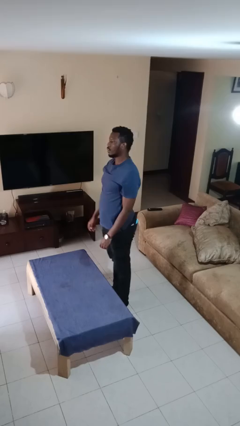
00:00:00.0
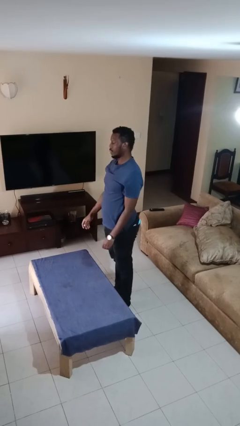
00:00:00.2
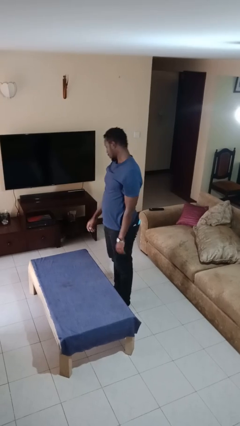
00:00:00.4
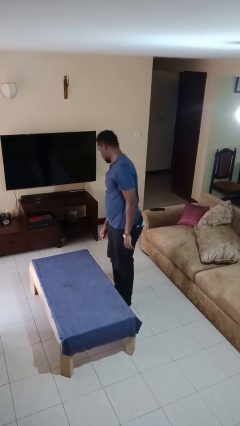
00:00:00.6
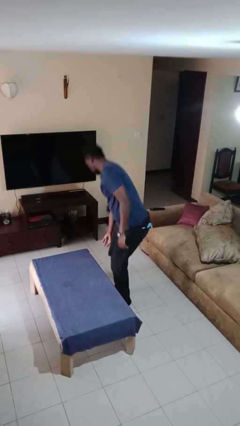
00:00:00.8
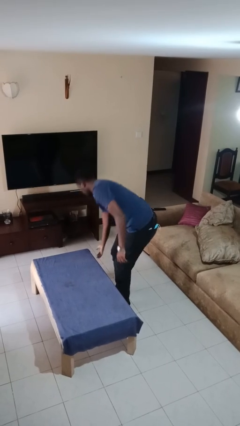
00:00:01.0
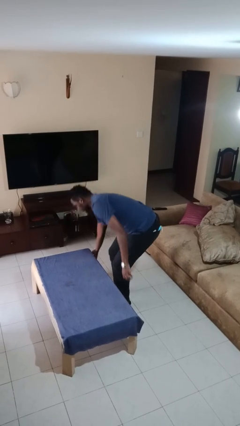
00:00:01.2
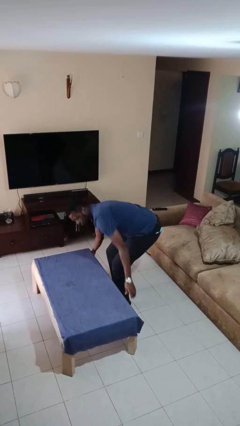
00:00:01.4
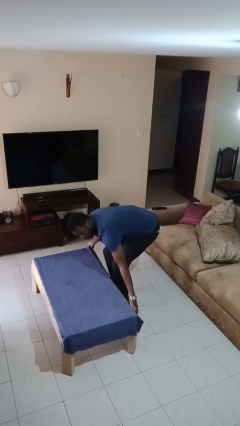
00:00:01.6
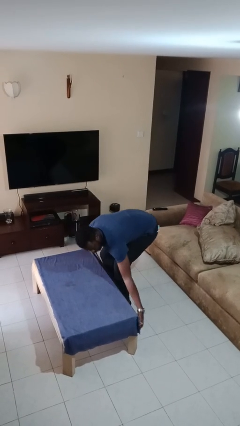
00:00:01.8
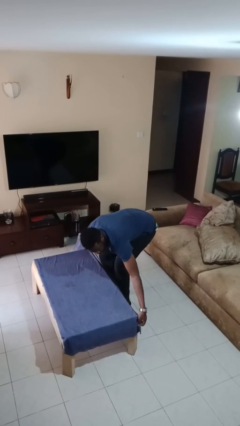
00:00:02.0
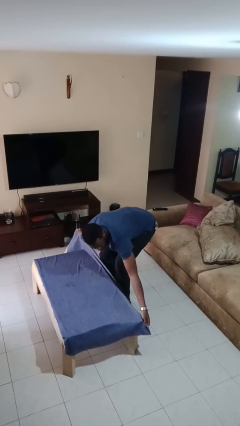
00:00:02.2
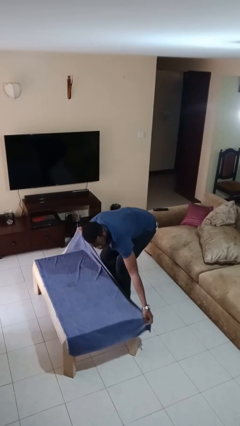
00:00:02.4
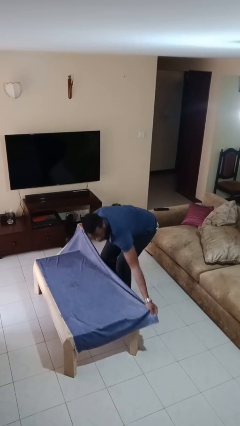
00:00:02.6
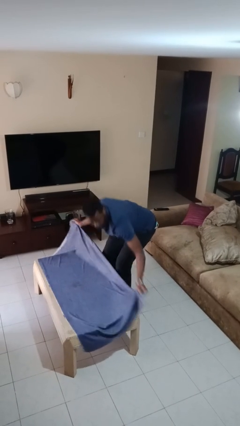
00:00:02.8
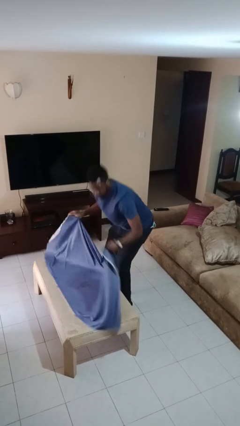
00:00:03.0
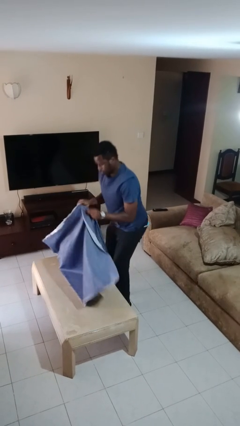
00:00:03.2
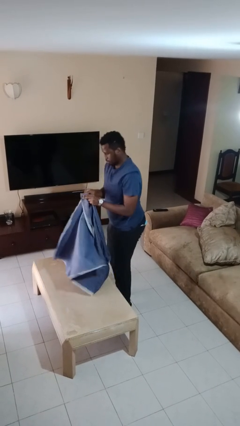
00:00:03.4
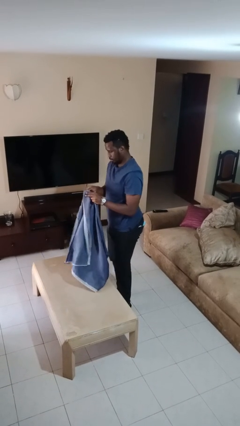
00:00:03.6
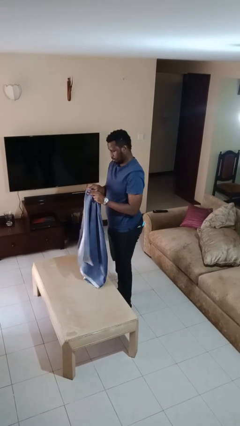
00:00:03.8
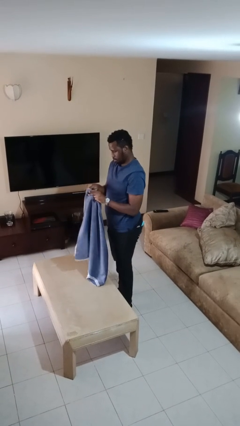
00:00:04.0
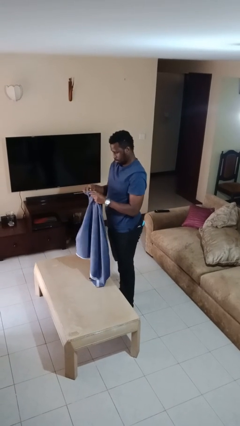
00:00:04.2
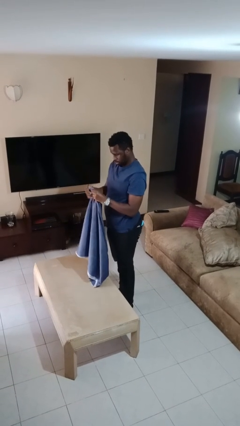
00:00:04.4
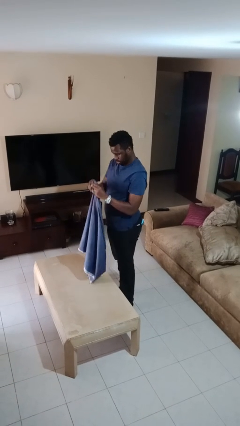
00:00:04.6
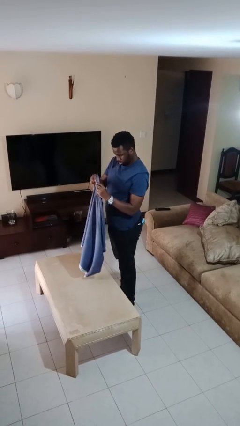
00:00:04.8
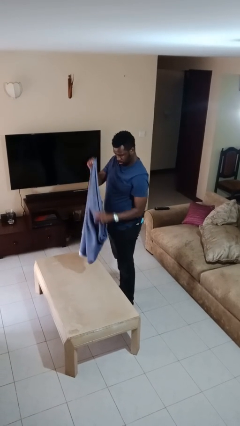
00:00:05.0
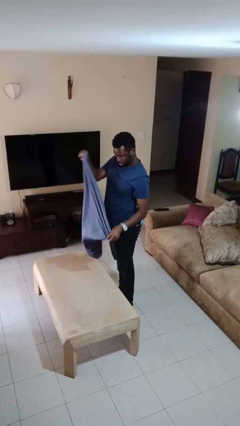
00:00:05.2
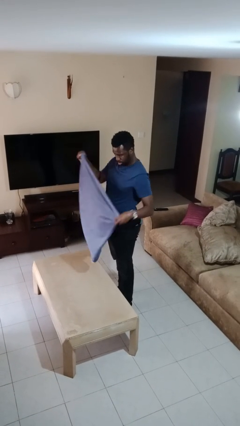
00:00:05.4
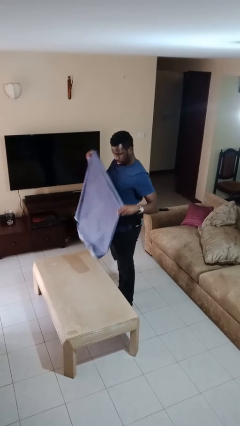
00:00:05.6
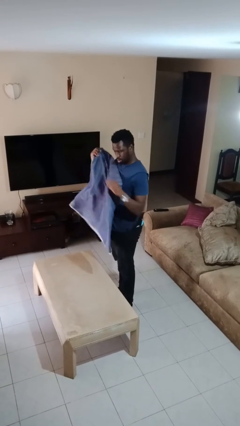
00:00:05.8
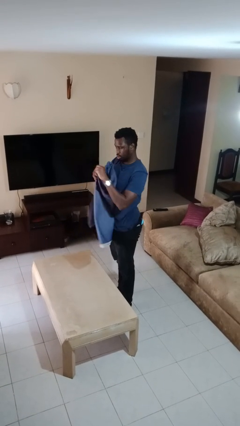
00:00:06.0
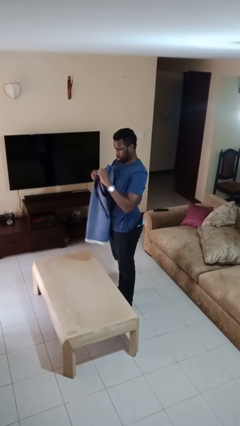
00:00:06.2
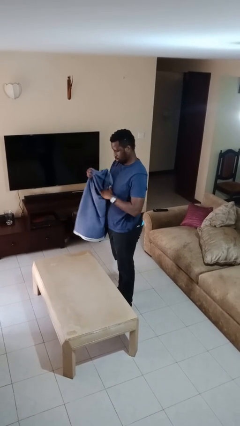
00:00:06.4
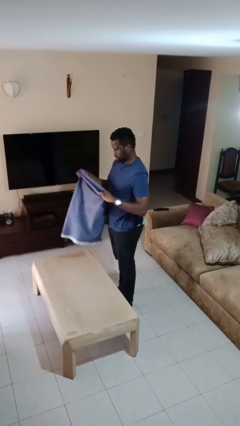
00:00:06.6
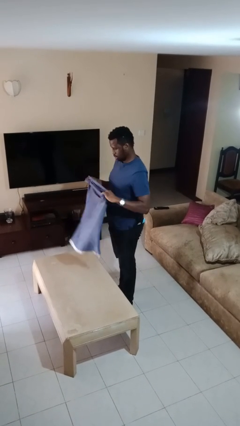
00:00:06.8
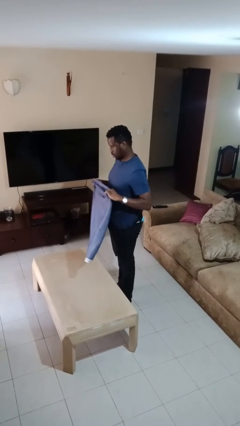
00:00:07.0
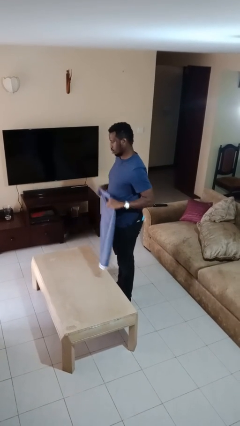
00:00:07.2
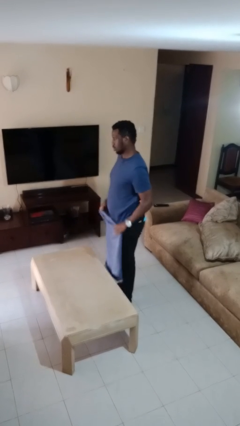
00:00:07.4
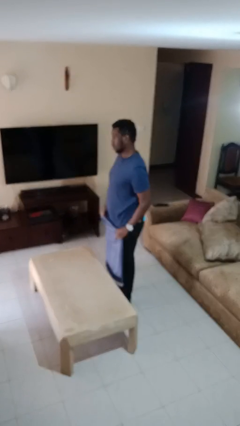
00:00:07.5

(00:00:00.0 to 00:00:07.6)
person folds tablecloth

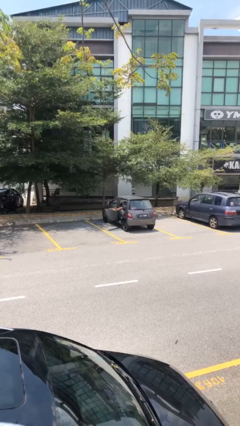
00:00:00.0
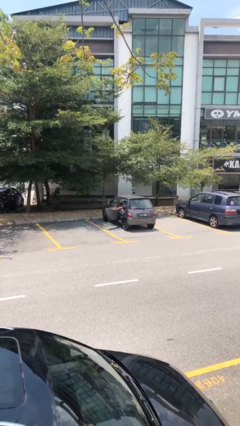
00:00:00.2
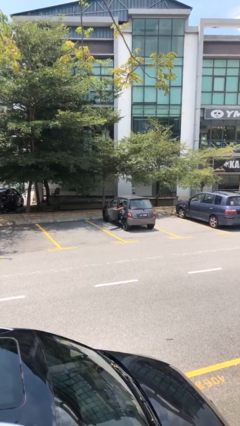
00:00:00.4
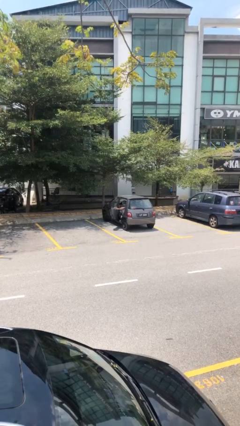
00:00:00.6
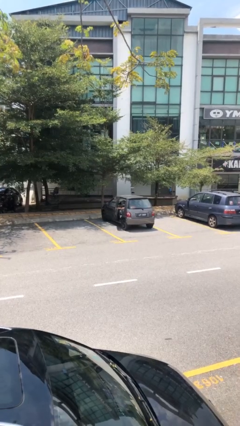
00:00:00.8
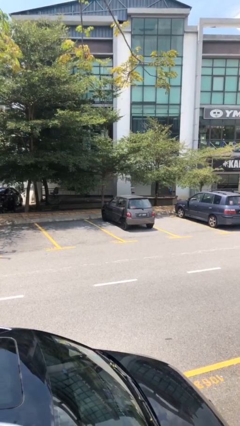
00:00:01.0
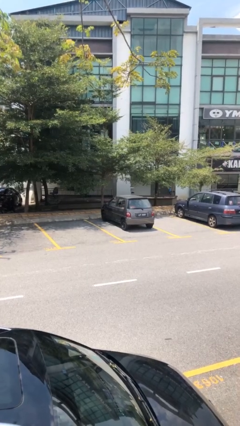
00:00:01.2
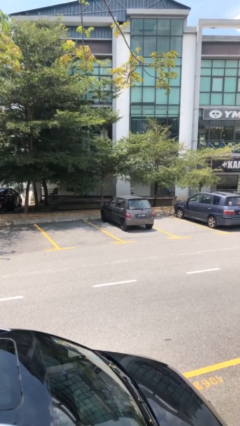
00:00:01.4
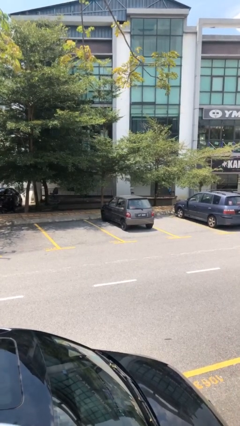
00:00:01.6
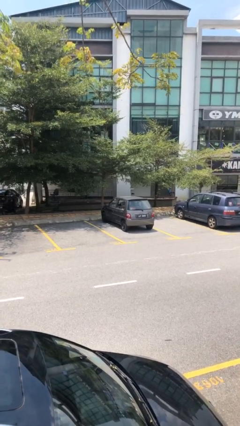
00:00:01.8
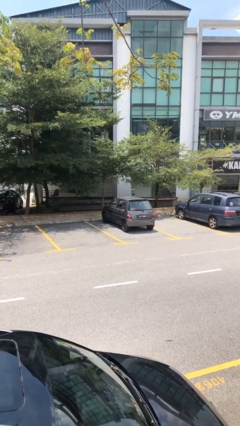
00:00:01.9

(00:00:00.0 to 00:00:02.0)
person closes car door

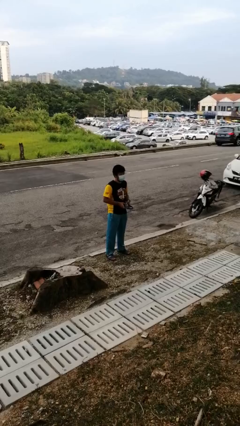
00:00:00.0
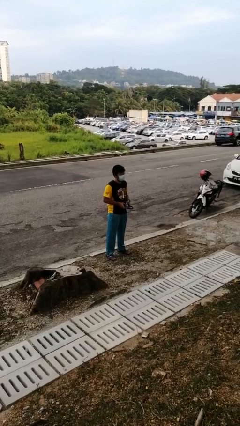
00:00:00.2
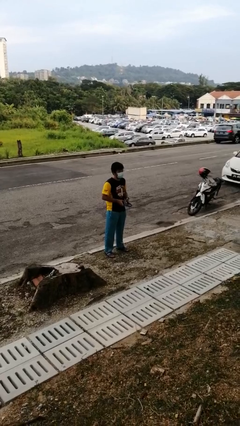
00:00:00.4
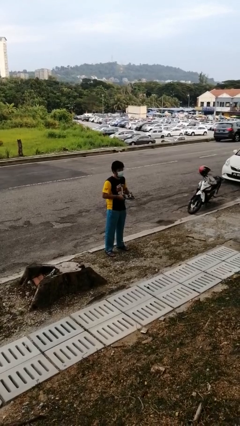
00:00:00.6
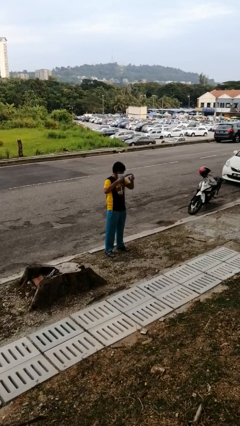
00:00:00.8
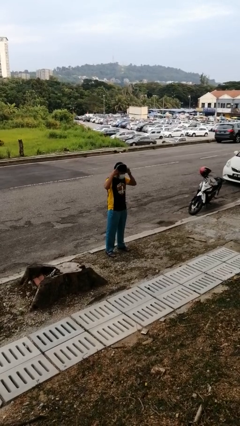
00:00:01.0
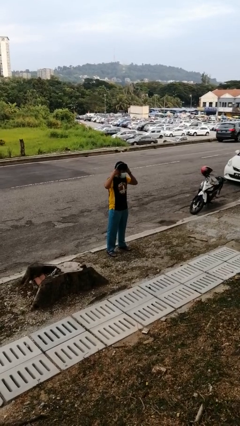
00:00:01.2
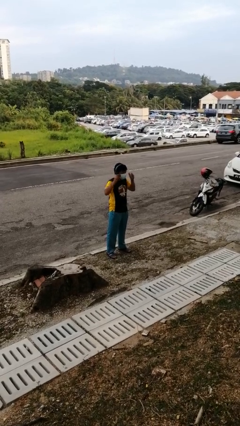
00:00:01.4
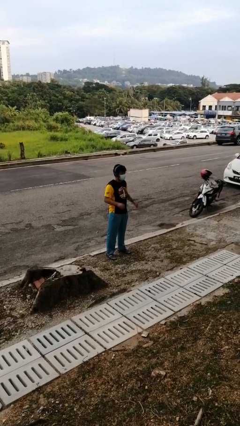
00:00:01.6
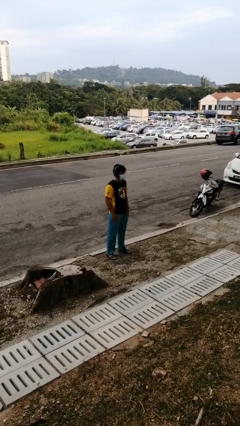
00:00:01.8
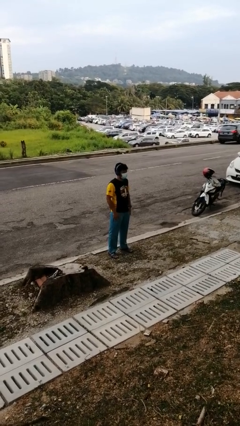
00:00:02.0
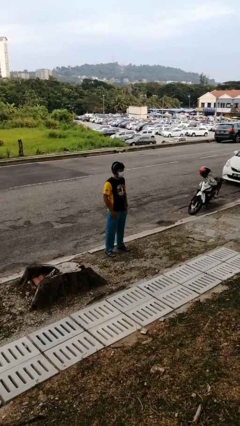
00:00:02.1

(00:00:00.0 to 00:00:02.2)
person puts on headphones

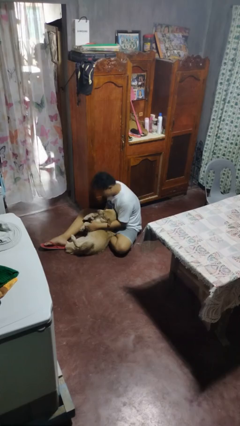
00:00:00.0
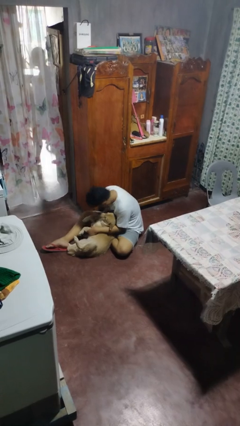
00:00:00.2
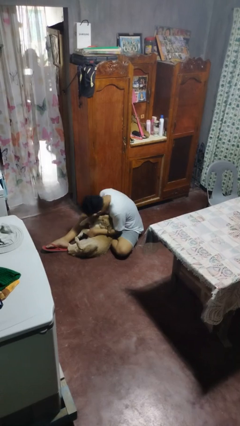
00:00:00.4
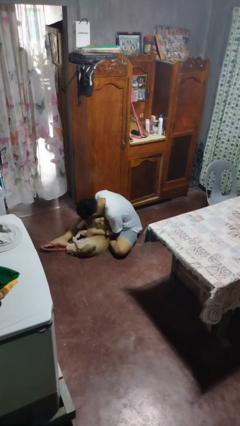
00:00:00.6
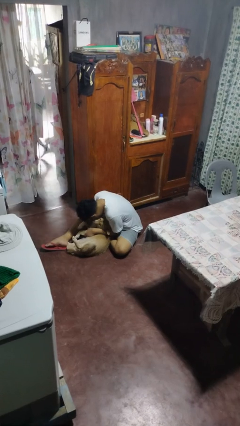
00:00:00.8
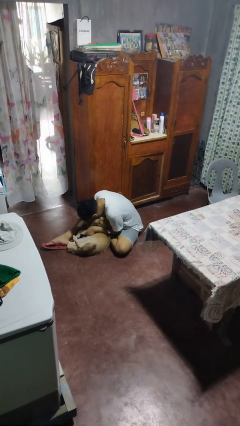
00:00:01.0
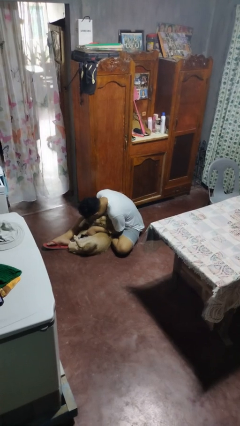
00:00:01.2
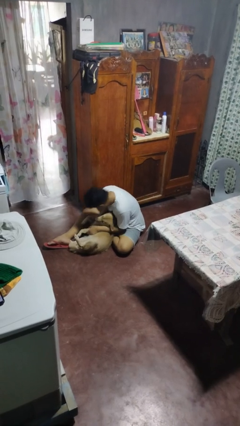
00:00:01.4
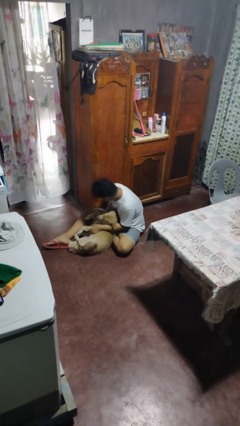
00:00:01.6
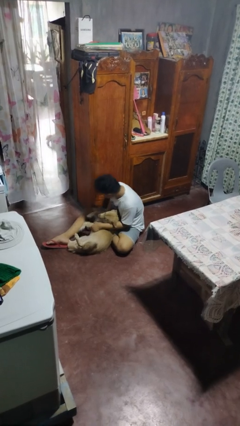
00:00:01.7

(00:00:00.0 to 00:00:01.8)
person hugs dog

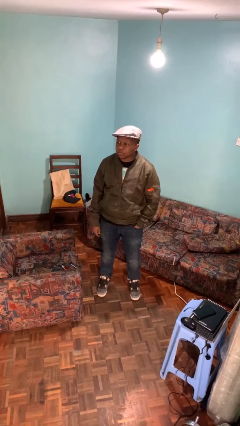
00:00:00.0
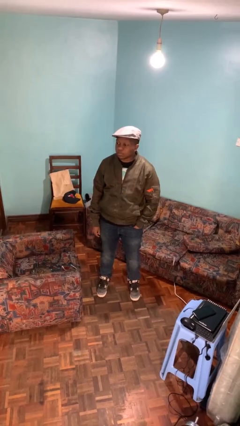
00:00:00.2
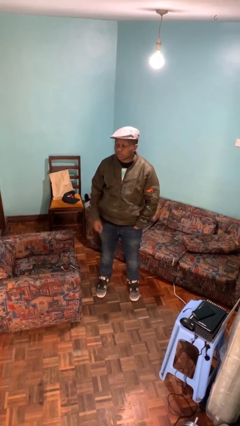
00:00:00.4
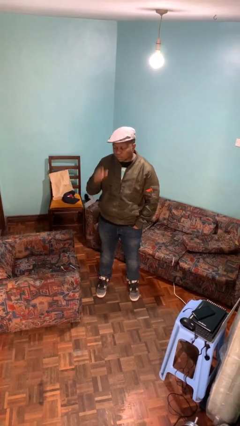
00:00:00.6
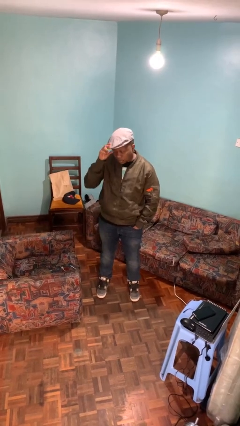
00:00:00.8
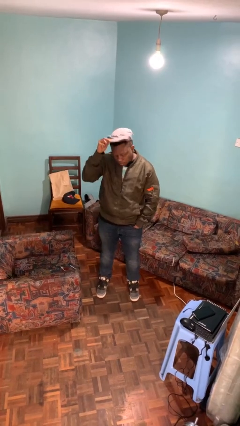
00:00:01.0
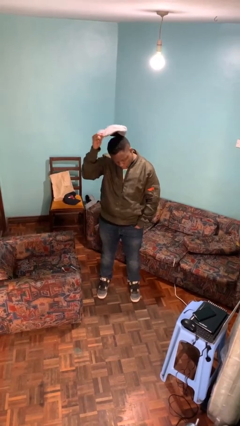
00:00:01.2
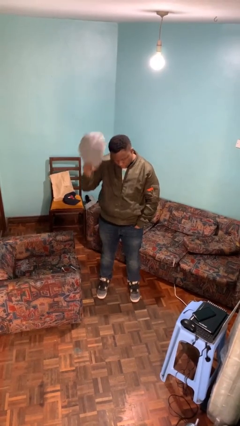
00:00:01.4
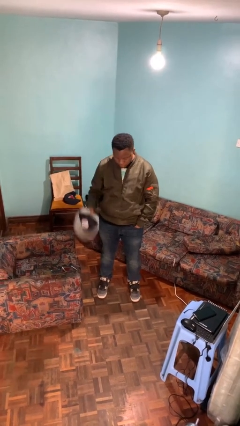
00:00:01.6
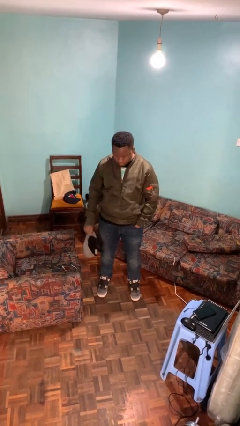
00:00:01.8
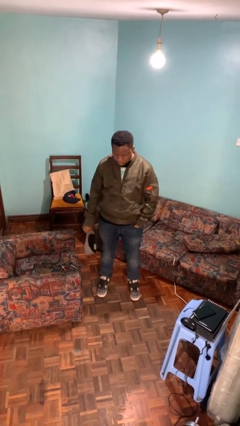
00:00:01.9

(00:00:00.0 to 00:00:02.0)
person takes off hat

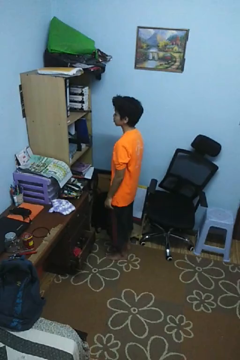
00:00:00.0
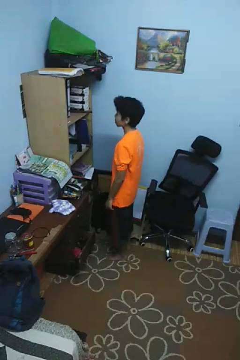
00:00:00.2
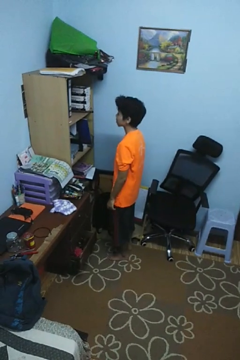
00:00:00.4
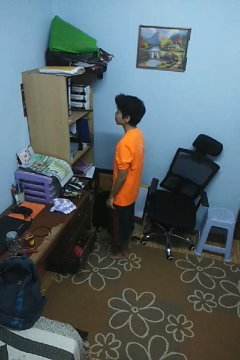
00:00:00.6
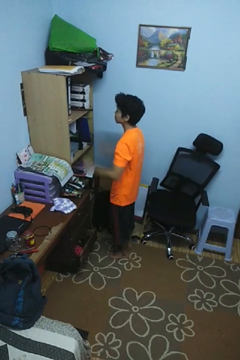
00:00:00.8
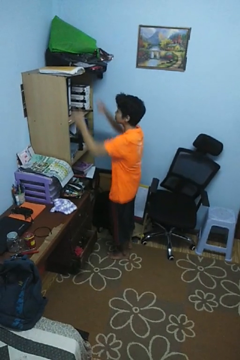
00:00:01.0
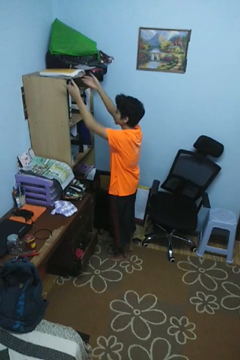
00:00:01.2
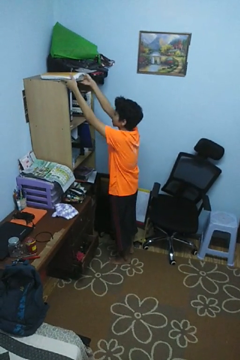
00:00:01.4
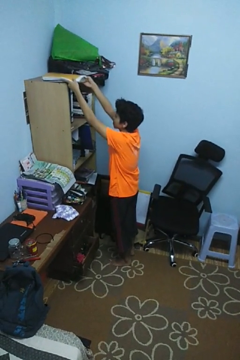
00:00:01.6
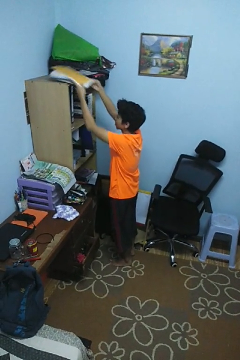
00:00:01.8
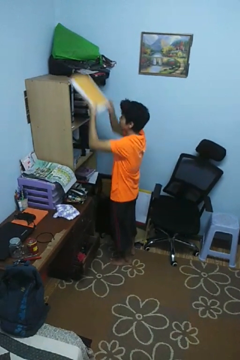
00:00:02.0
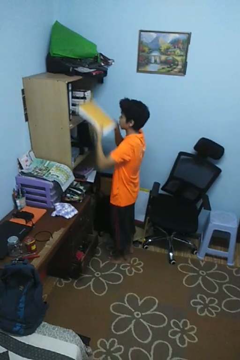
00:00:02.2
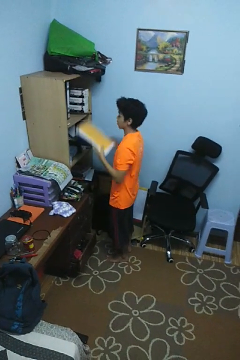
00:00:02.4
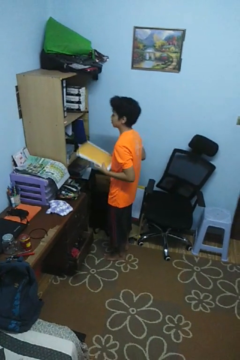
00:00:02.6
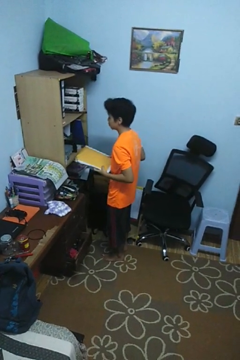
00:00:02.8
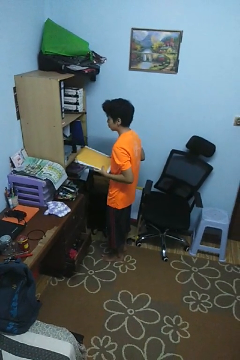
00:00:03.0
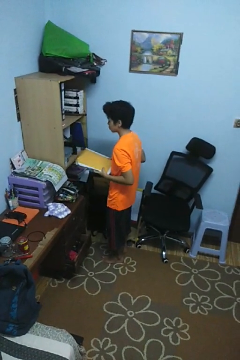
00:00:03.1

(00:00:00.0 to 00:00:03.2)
person picks up object from shelf
